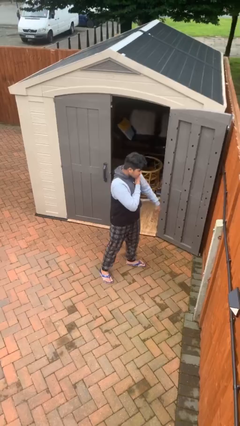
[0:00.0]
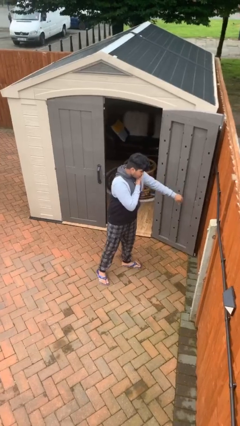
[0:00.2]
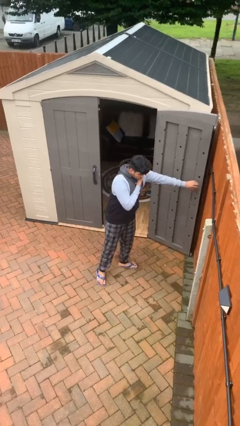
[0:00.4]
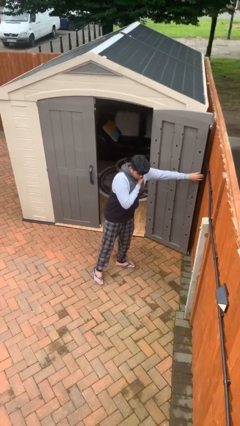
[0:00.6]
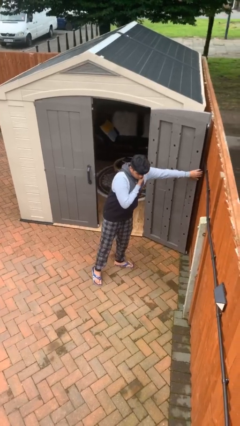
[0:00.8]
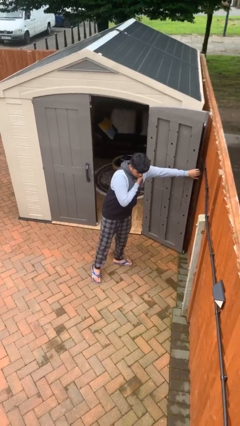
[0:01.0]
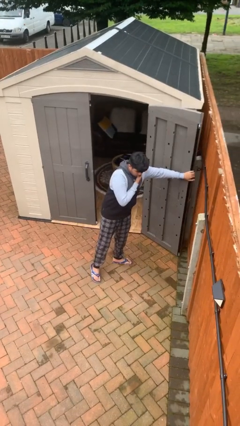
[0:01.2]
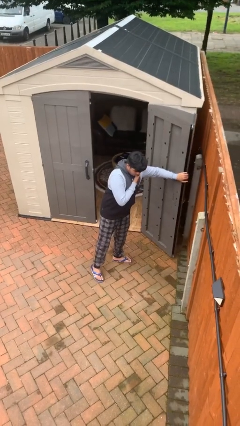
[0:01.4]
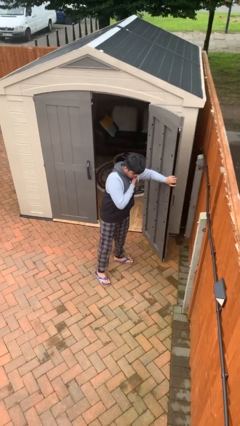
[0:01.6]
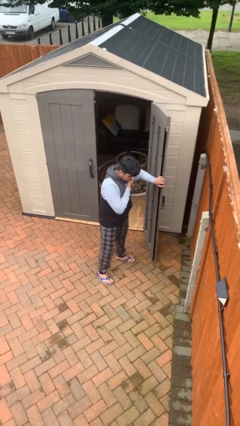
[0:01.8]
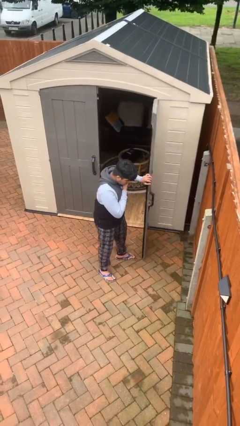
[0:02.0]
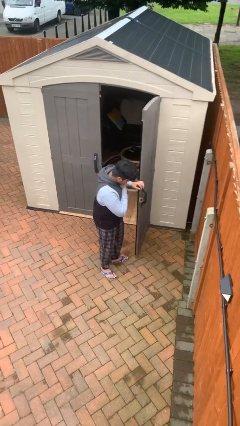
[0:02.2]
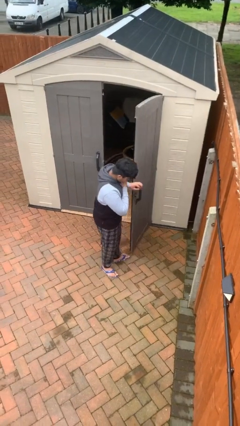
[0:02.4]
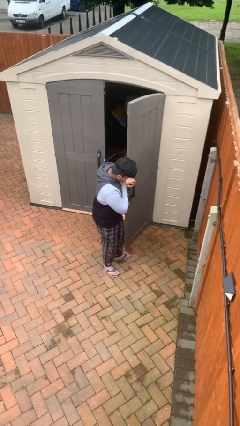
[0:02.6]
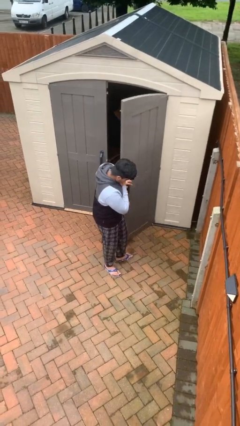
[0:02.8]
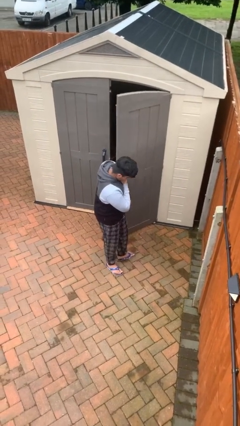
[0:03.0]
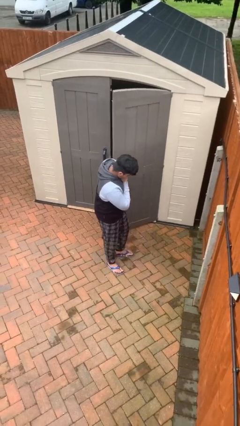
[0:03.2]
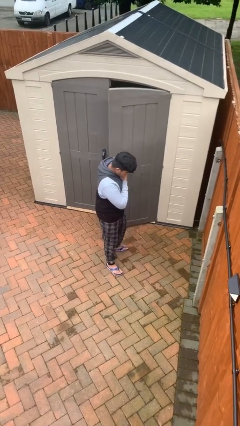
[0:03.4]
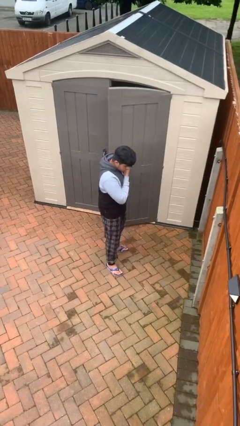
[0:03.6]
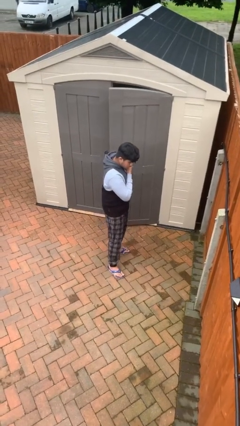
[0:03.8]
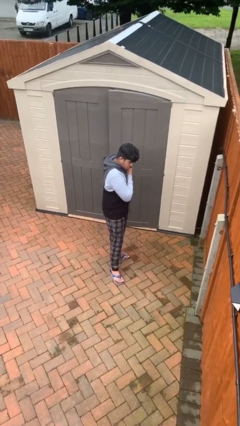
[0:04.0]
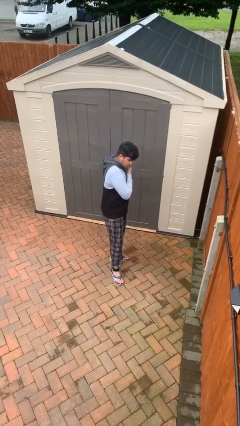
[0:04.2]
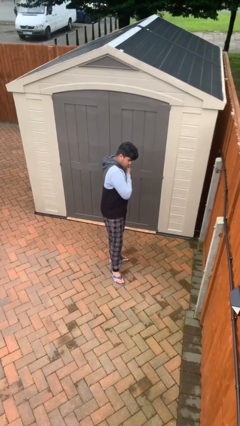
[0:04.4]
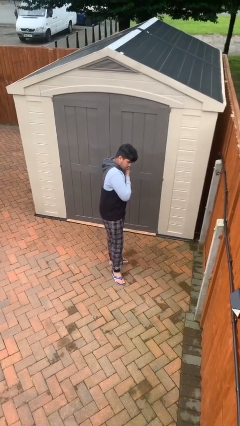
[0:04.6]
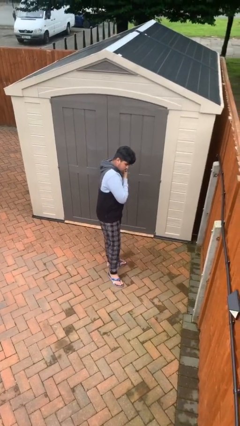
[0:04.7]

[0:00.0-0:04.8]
person closes facility door

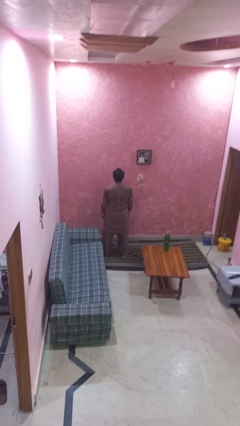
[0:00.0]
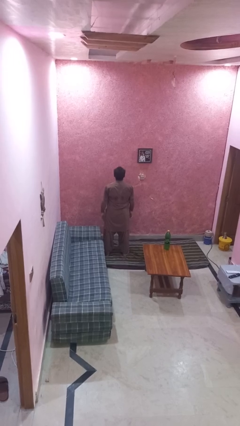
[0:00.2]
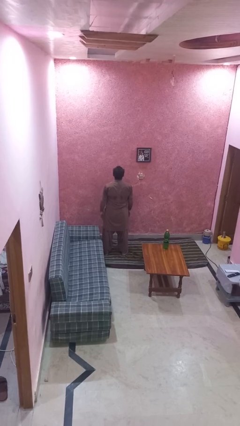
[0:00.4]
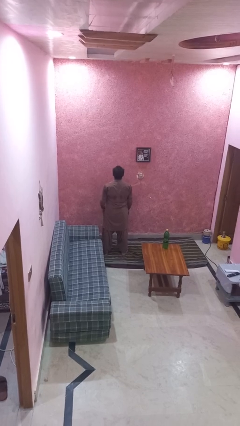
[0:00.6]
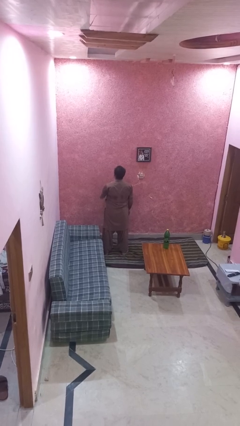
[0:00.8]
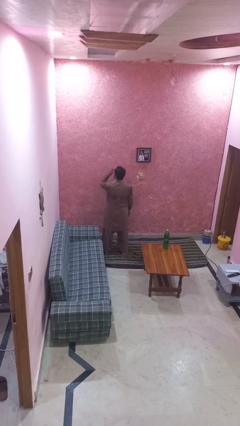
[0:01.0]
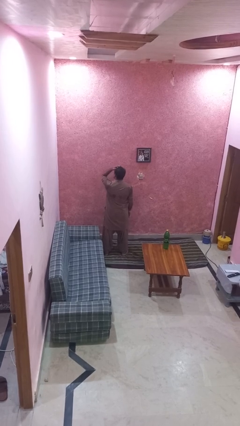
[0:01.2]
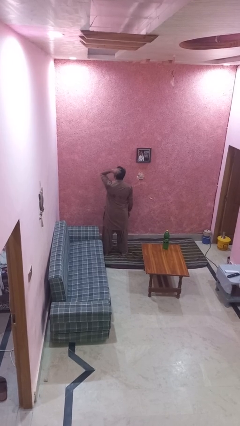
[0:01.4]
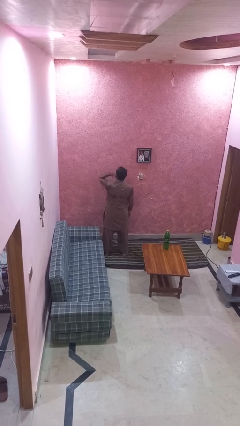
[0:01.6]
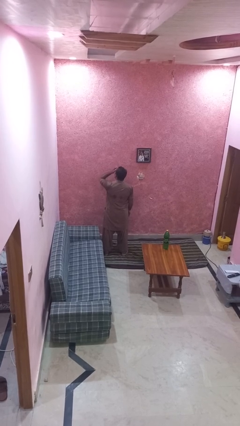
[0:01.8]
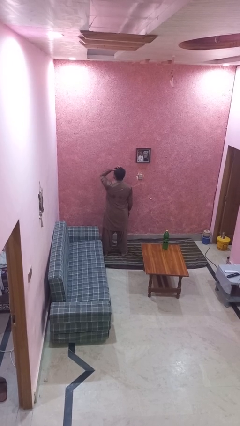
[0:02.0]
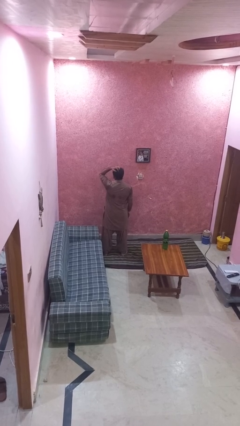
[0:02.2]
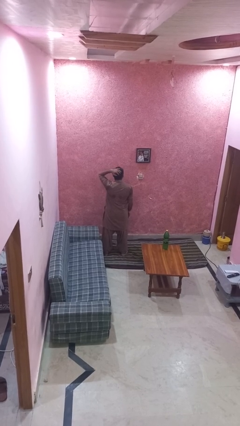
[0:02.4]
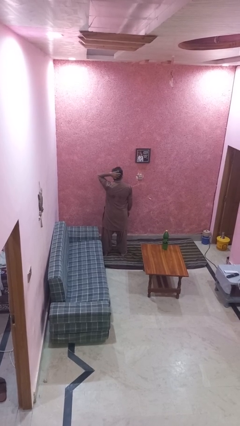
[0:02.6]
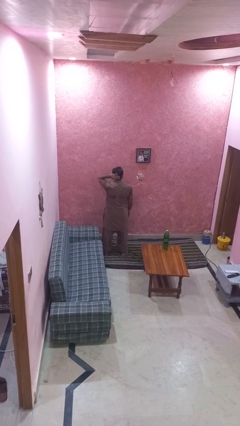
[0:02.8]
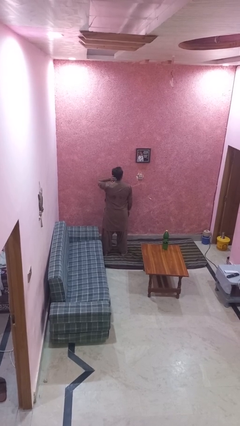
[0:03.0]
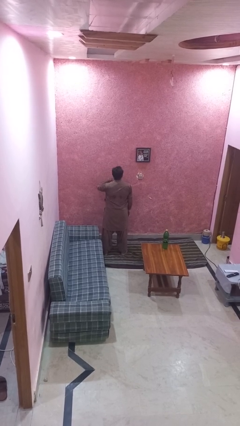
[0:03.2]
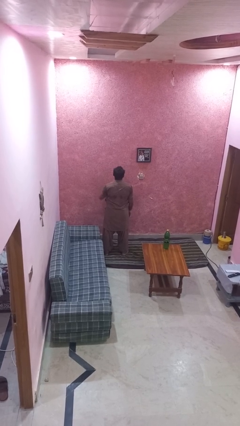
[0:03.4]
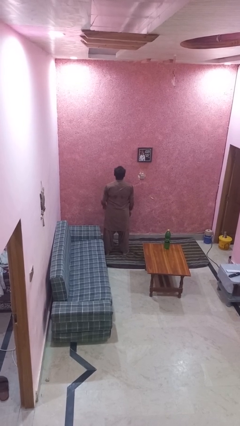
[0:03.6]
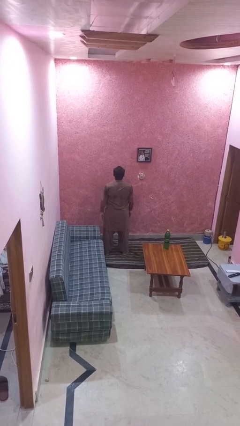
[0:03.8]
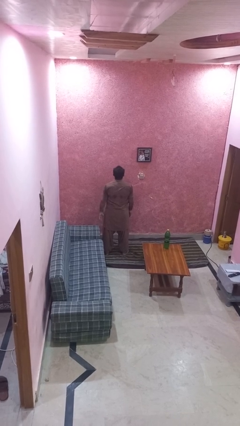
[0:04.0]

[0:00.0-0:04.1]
person strokes hair

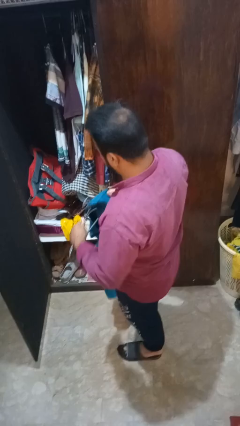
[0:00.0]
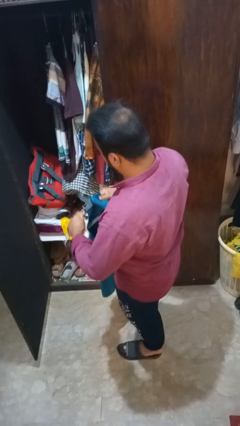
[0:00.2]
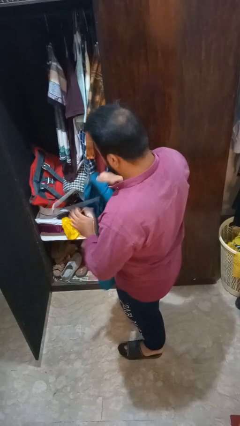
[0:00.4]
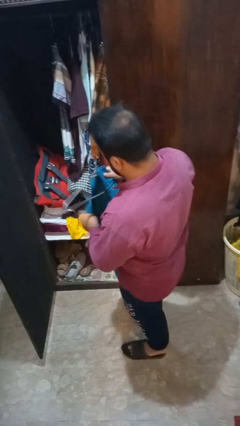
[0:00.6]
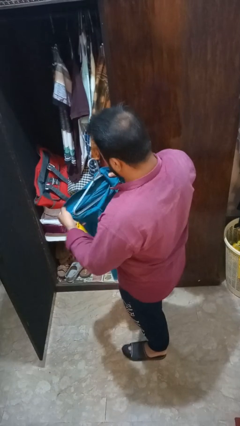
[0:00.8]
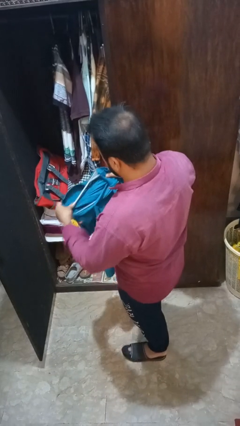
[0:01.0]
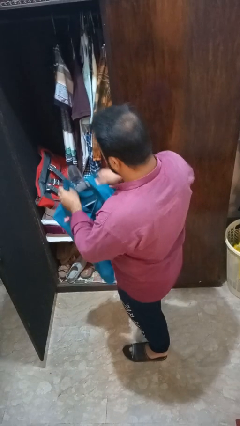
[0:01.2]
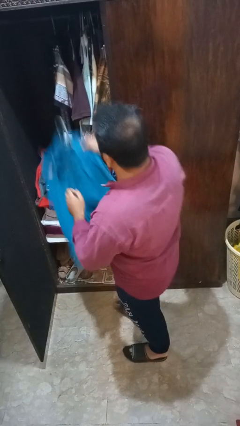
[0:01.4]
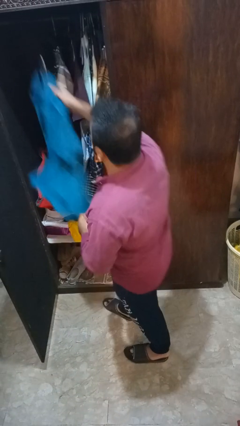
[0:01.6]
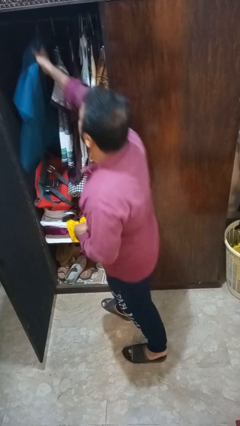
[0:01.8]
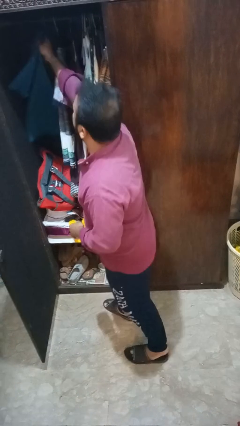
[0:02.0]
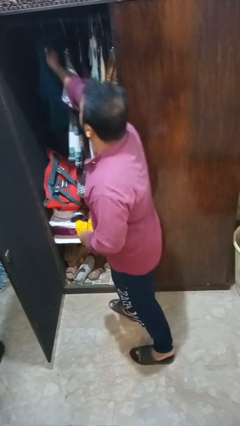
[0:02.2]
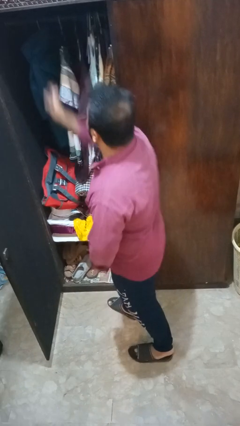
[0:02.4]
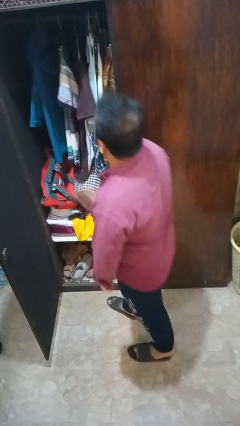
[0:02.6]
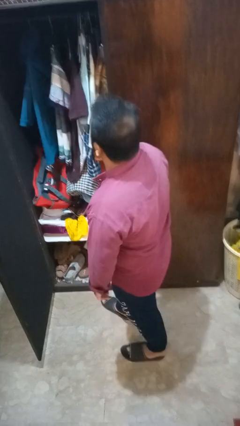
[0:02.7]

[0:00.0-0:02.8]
person puts clothes into closet

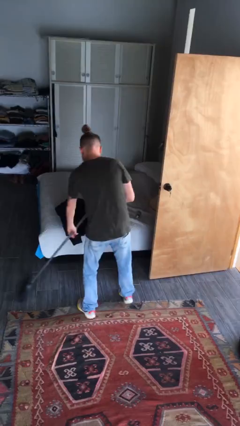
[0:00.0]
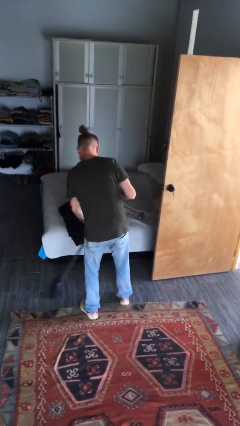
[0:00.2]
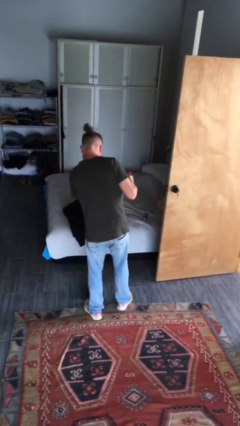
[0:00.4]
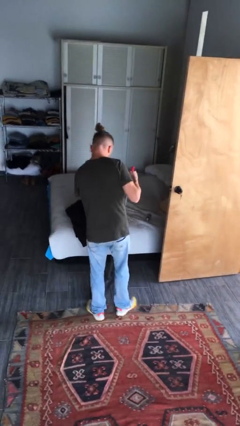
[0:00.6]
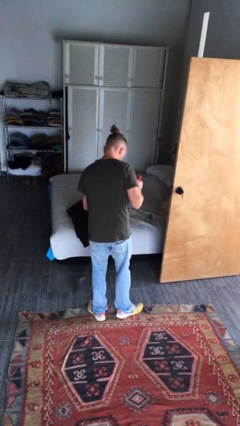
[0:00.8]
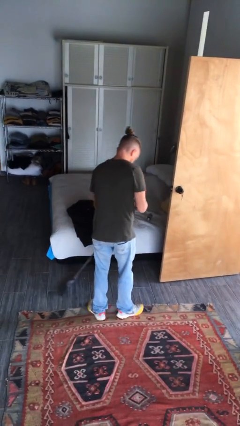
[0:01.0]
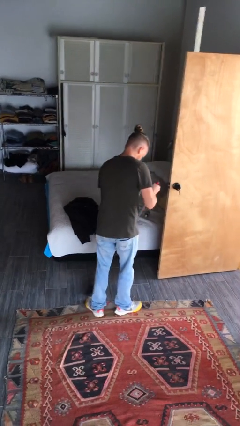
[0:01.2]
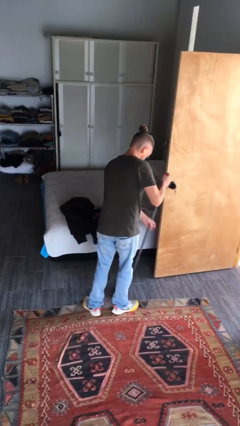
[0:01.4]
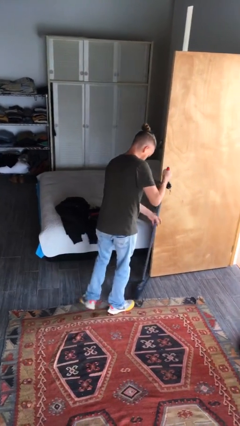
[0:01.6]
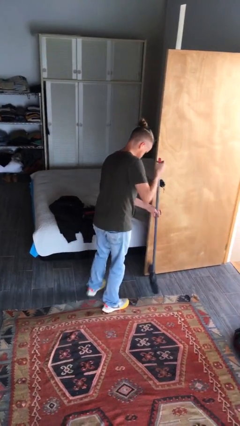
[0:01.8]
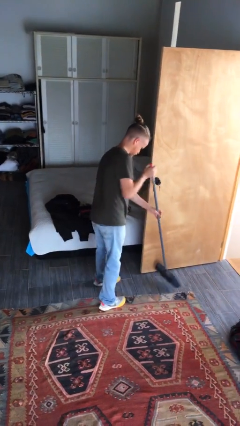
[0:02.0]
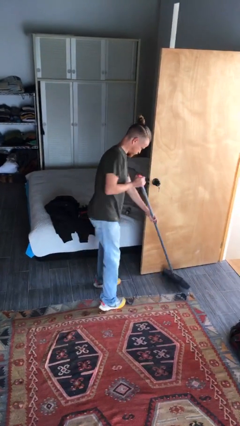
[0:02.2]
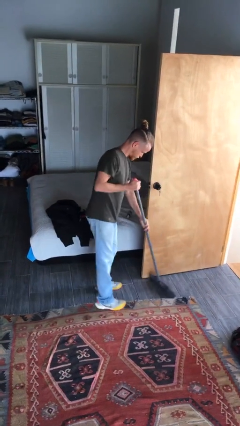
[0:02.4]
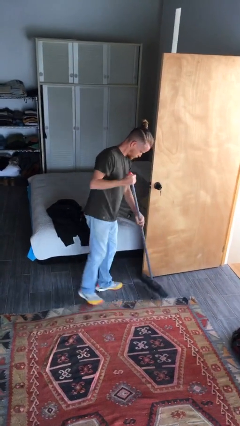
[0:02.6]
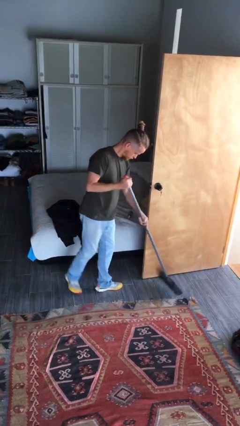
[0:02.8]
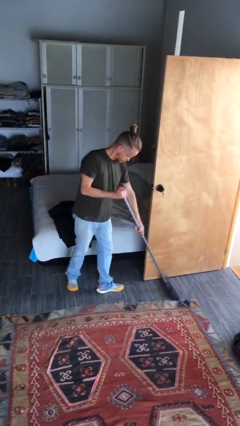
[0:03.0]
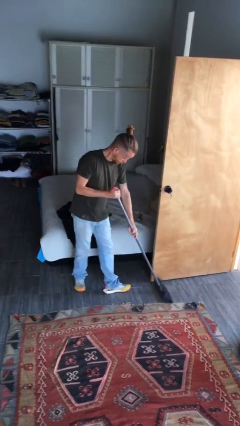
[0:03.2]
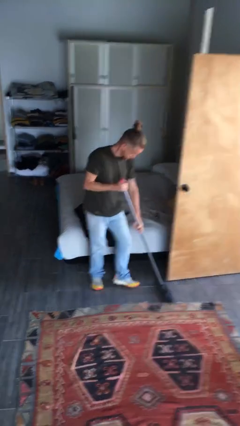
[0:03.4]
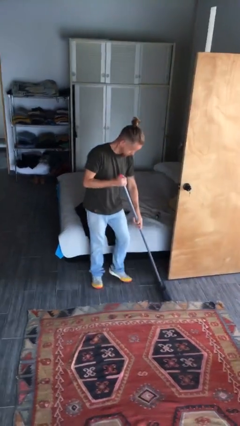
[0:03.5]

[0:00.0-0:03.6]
person sweeps floor

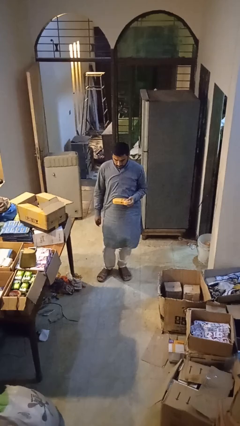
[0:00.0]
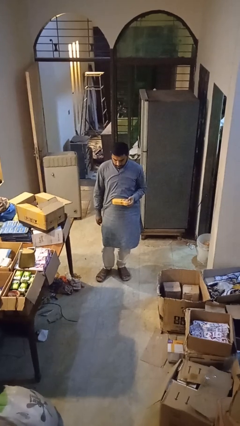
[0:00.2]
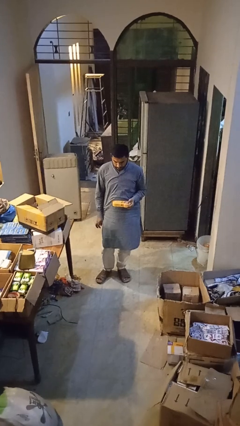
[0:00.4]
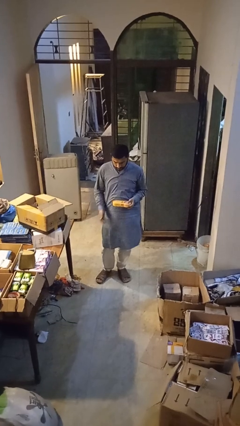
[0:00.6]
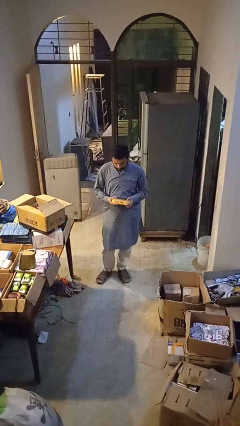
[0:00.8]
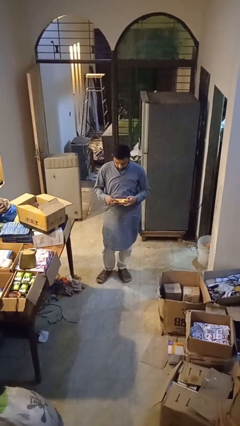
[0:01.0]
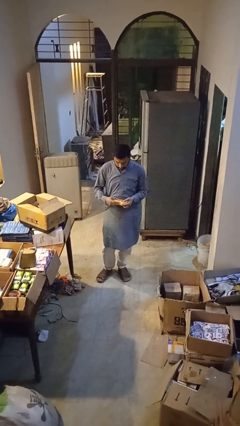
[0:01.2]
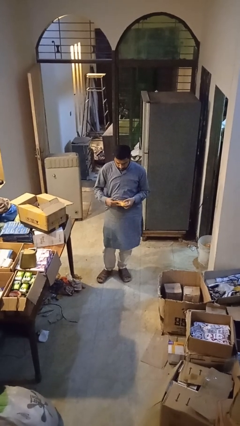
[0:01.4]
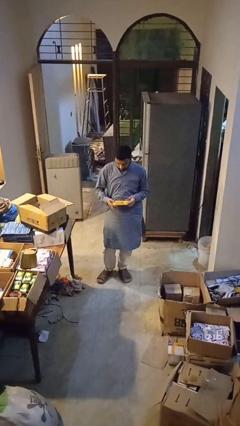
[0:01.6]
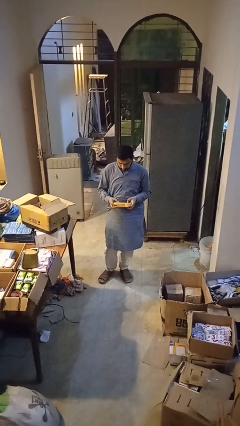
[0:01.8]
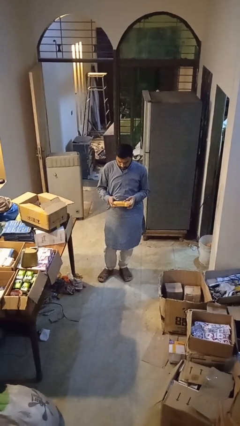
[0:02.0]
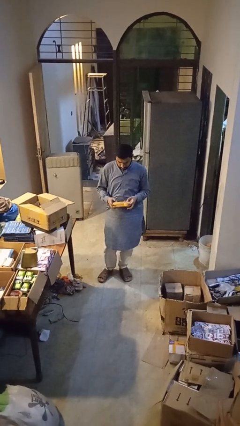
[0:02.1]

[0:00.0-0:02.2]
person interacts with handheld game

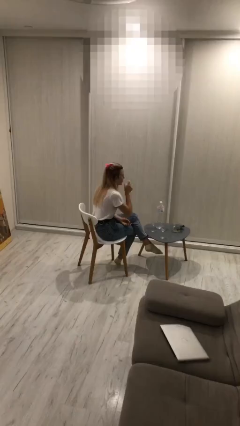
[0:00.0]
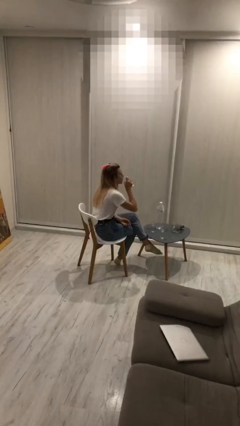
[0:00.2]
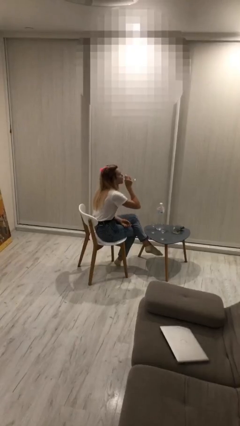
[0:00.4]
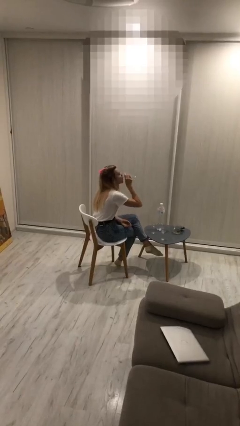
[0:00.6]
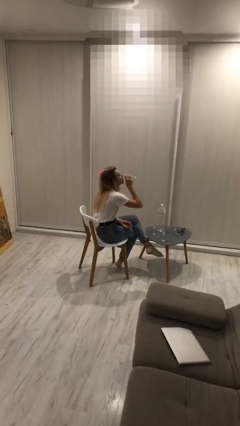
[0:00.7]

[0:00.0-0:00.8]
person drinks from shotglass
